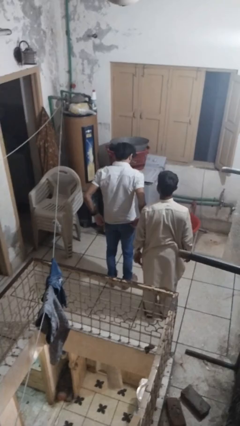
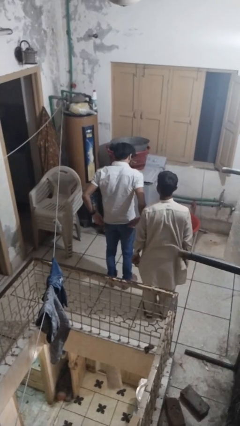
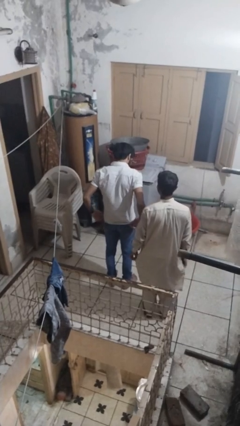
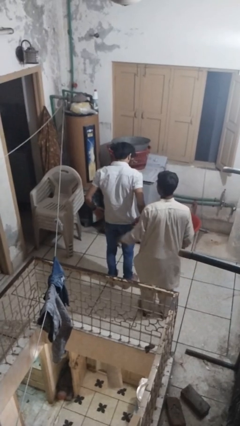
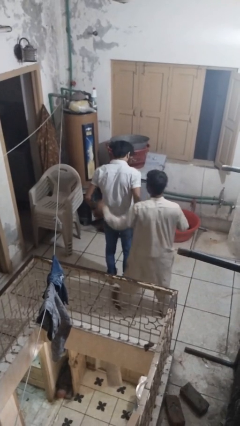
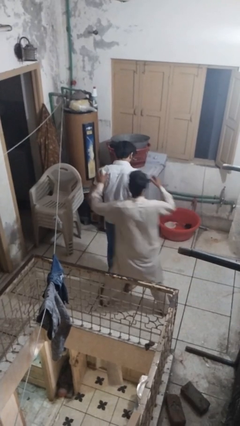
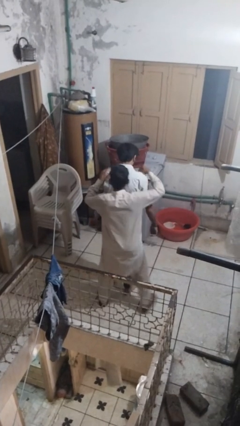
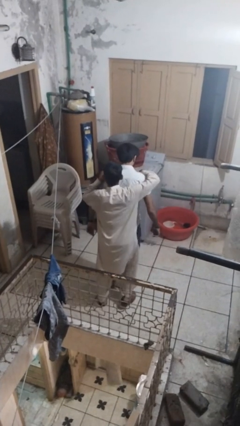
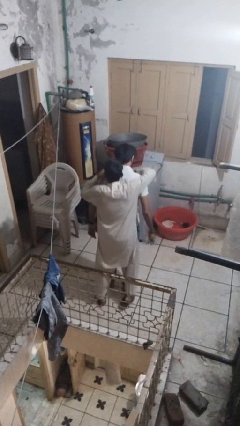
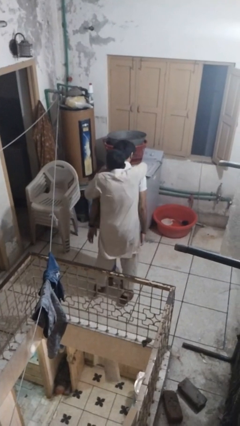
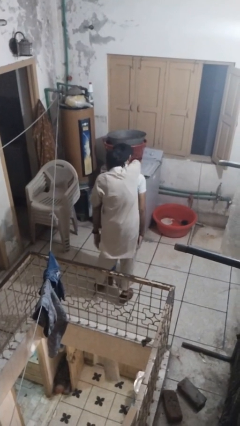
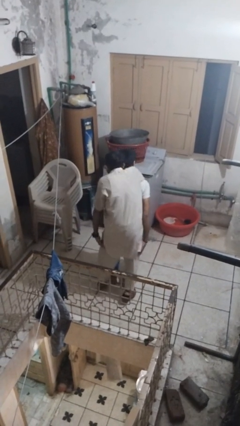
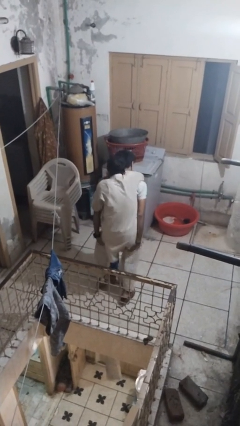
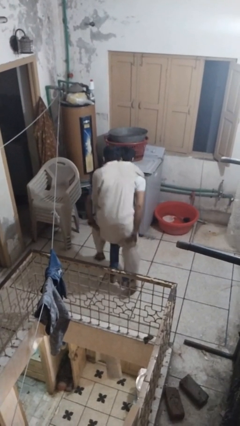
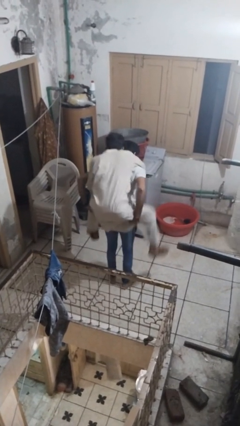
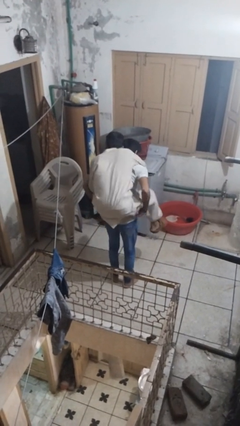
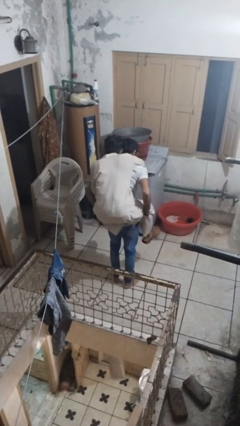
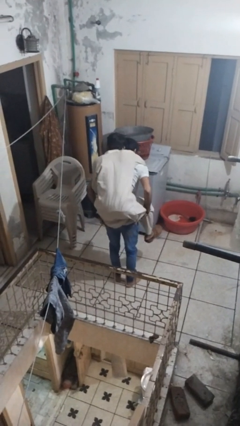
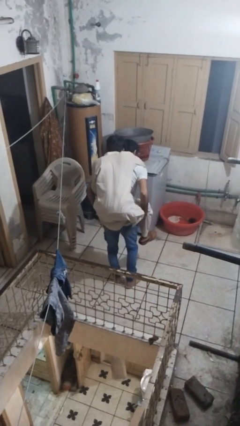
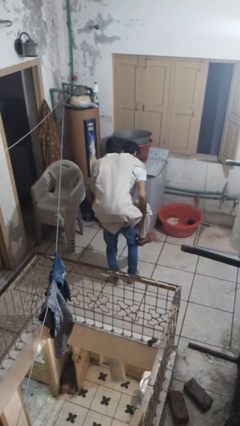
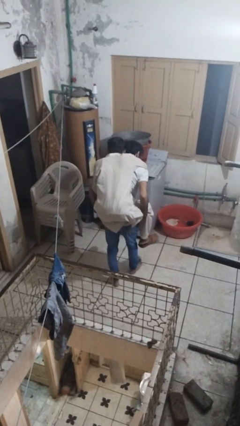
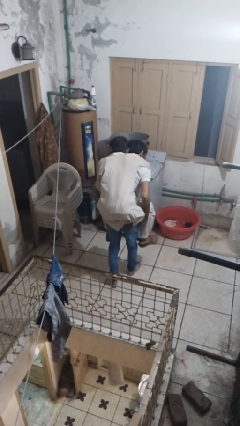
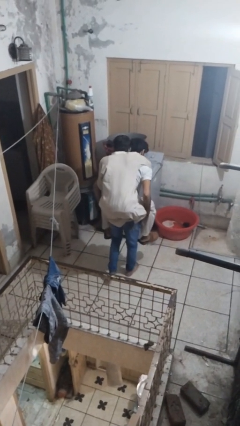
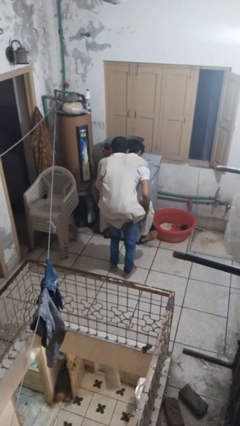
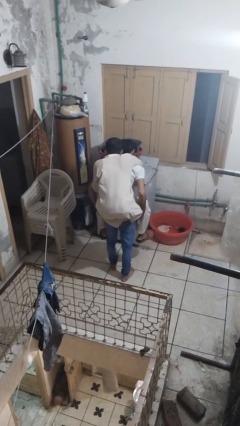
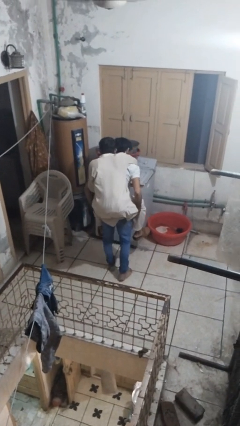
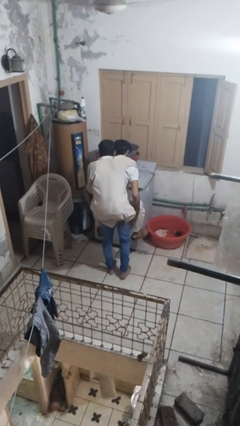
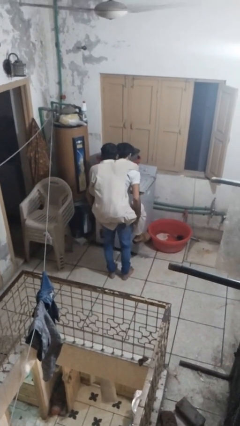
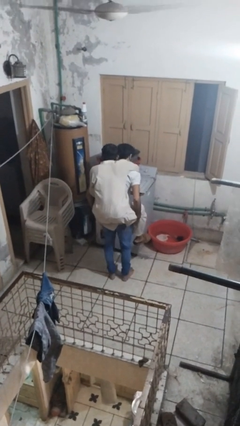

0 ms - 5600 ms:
person carries person on back

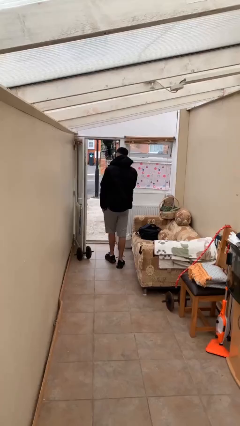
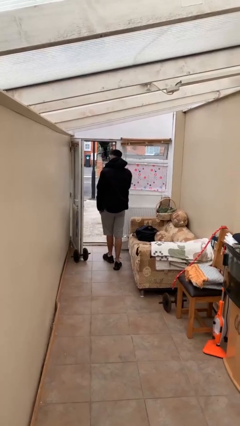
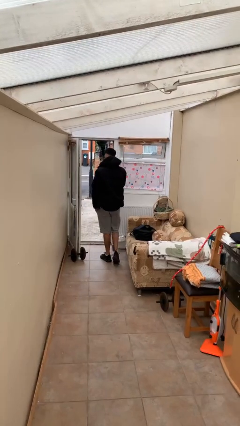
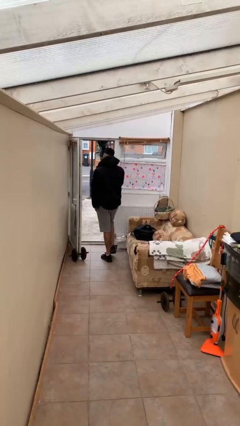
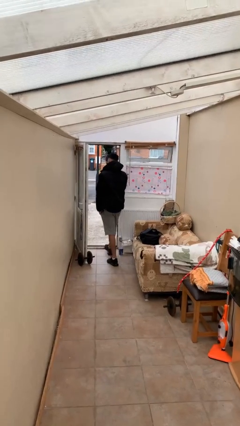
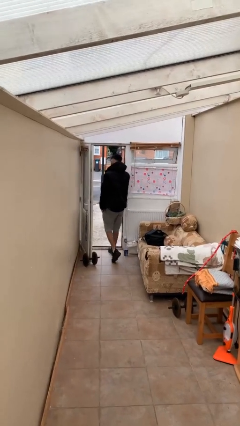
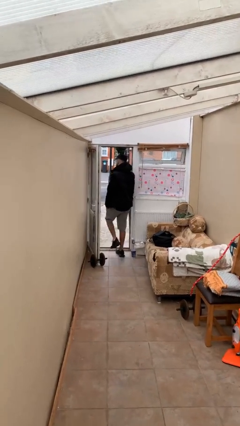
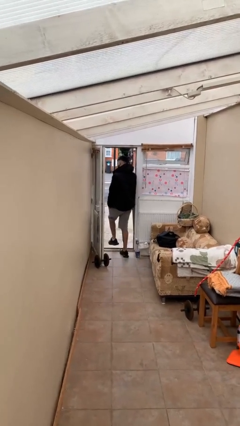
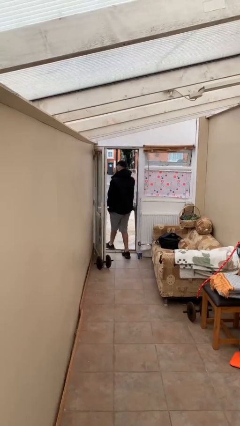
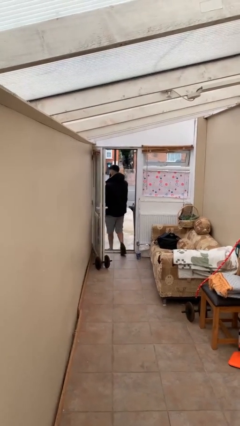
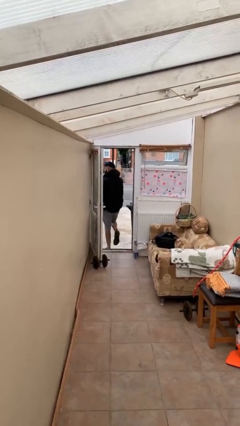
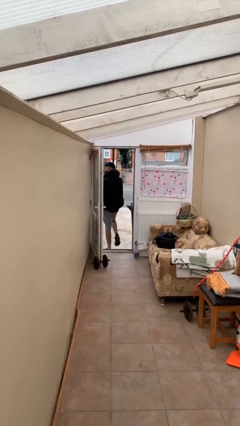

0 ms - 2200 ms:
person exits scene through structure

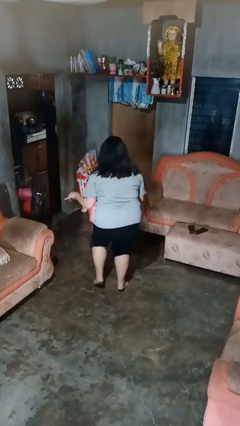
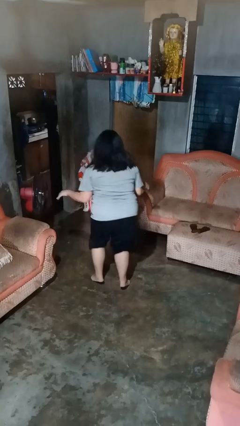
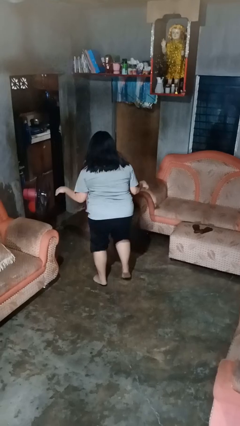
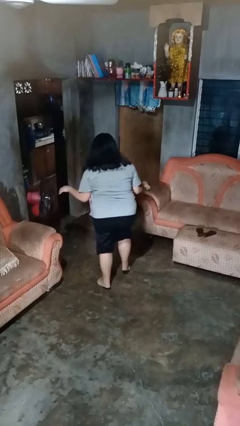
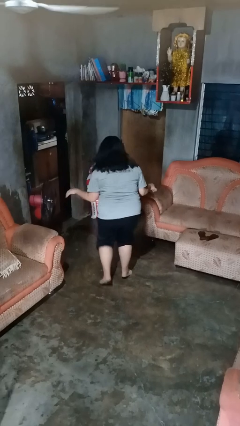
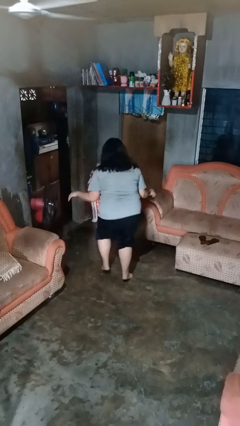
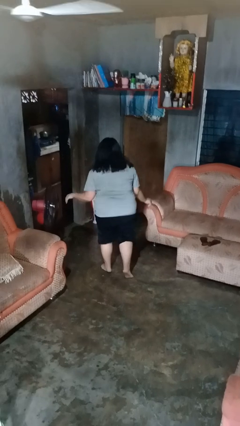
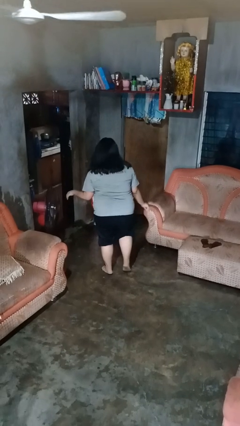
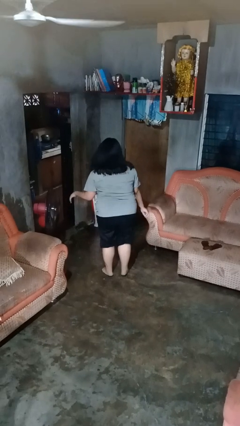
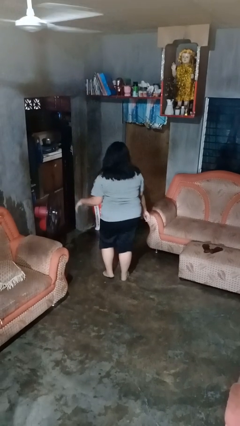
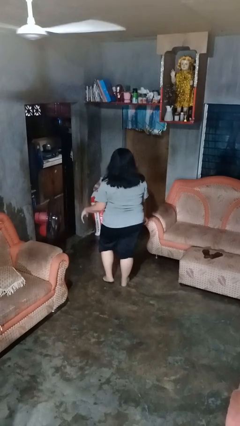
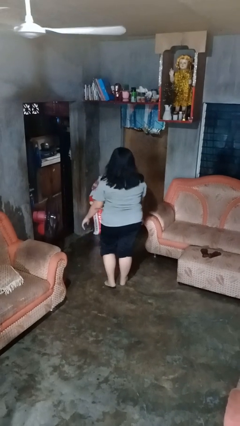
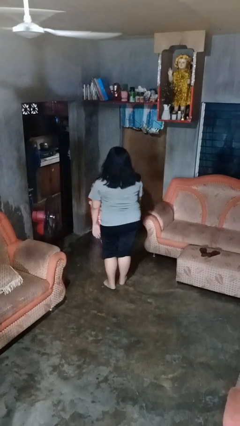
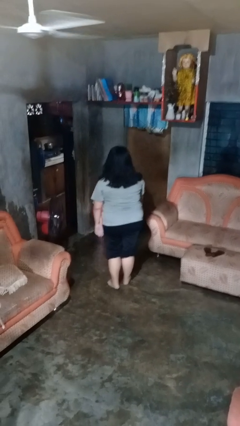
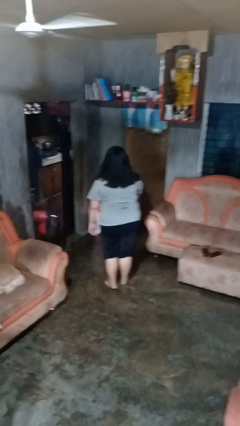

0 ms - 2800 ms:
person walks tiptoe

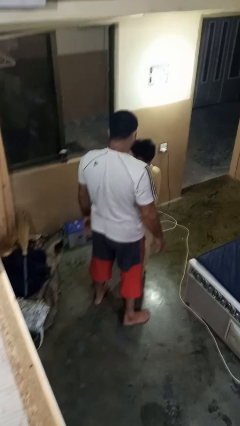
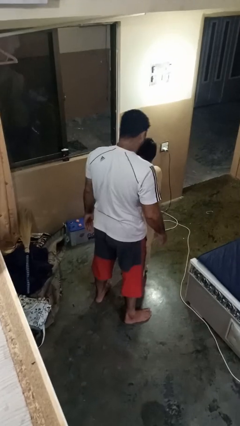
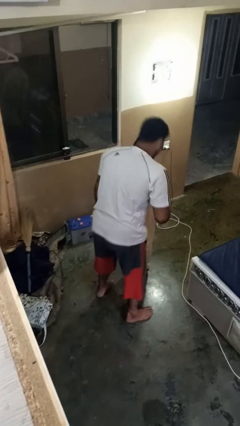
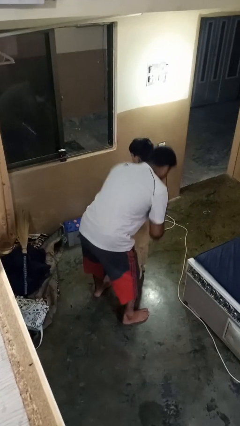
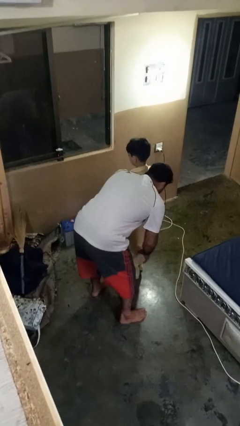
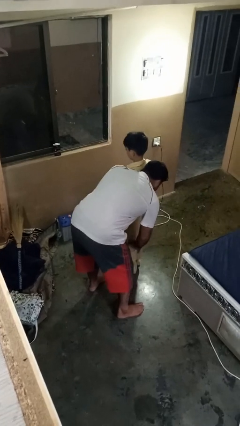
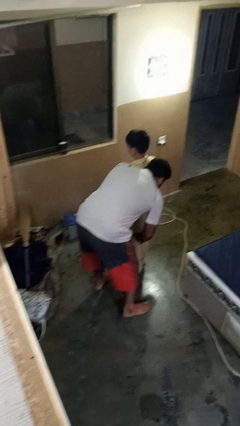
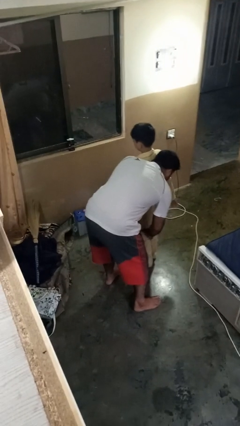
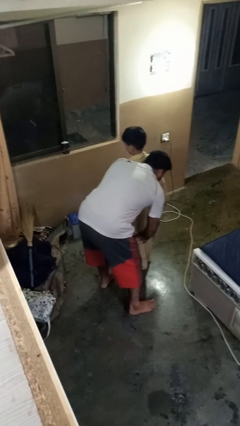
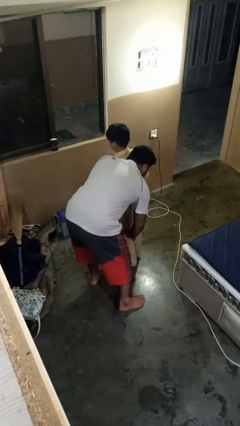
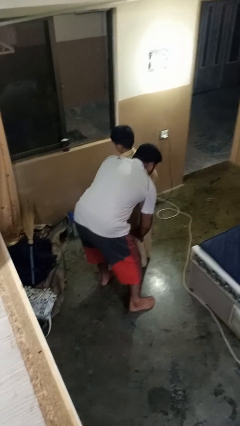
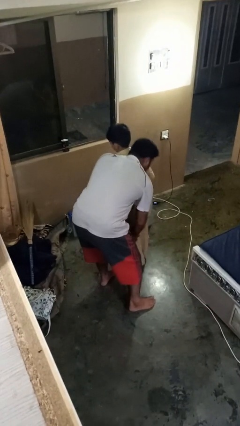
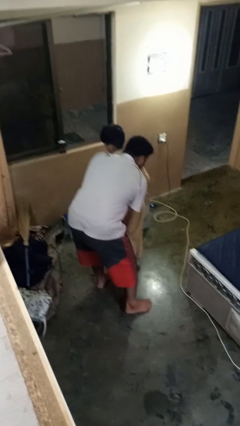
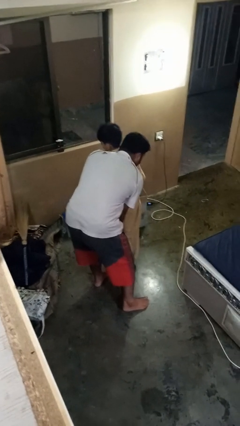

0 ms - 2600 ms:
person picks up person

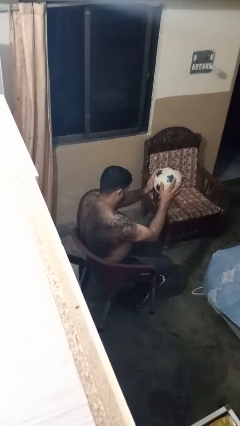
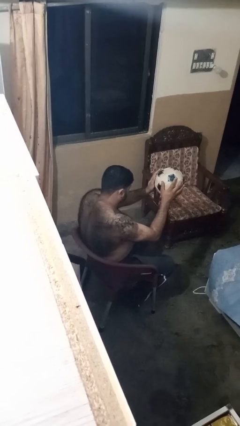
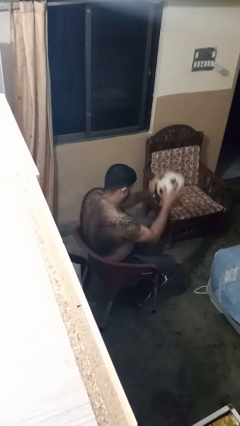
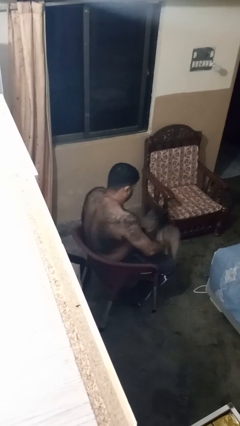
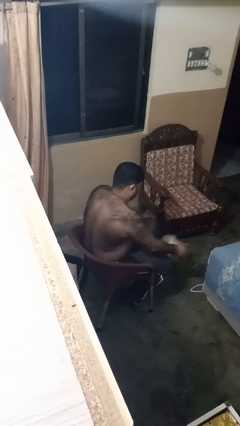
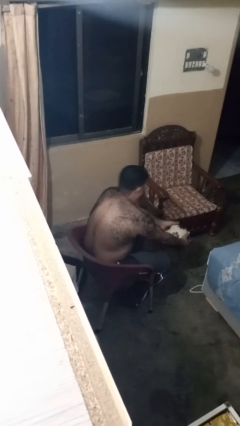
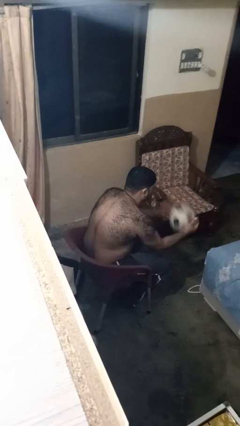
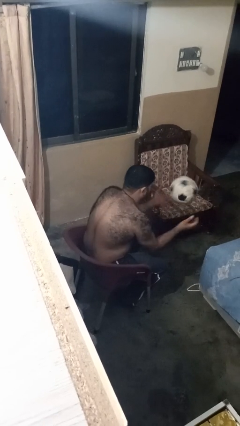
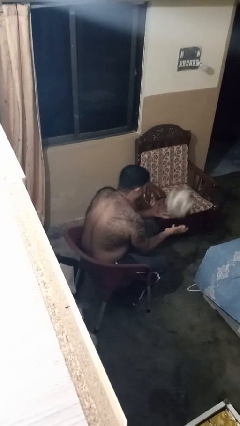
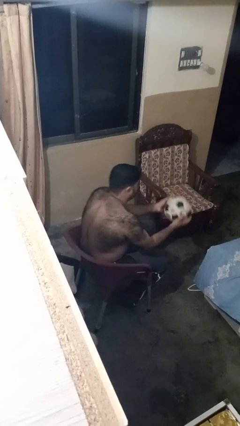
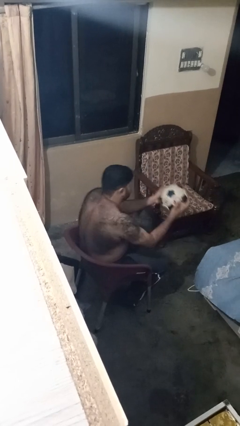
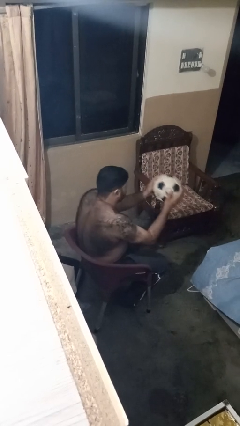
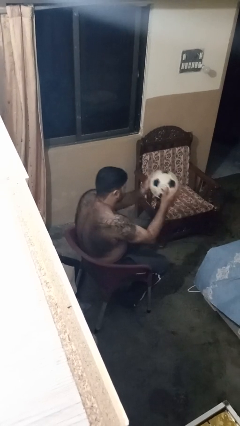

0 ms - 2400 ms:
person bounces ball on floor

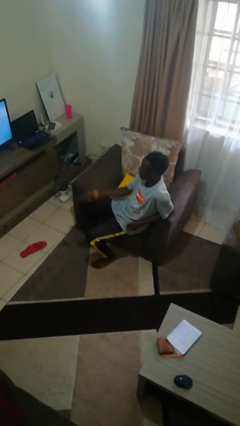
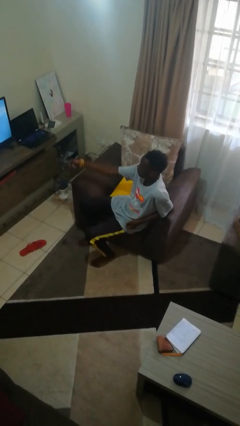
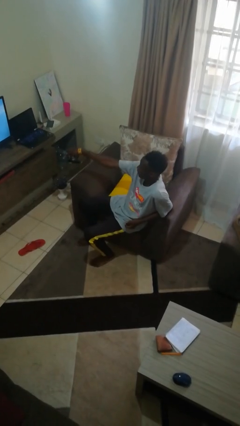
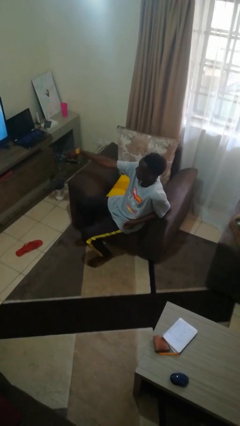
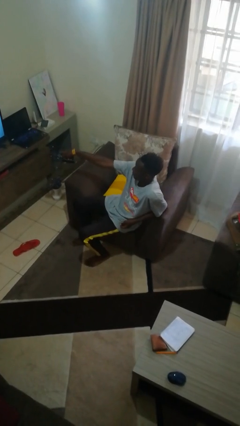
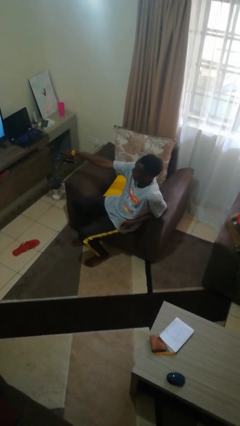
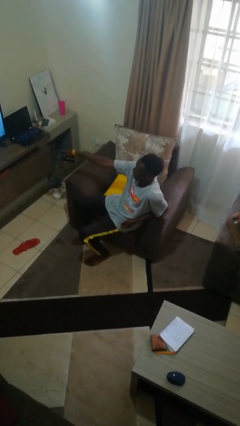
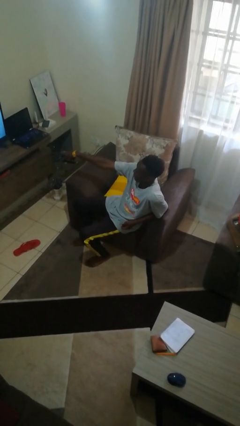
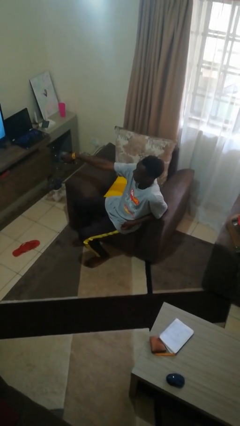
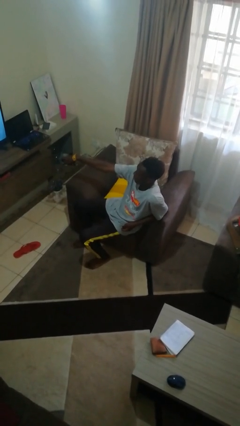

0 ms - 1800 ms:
person uses television remote
